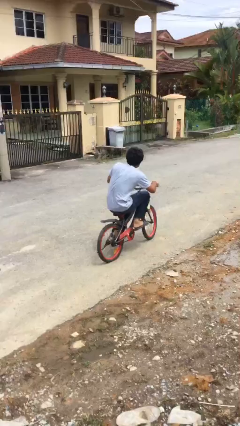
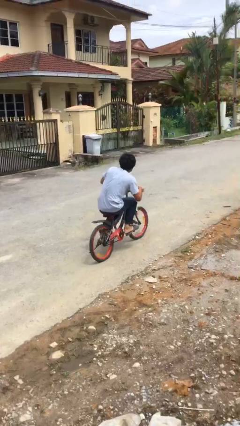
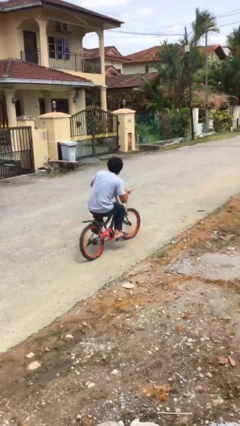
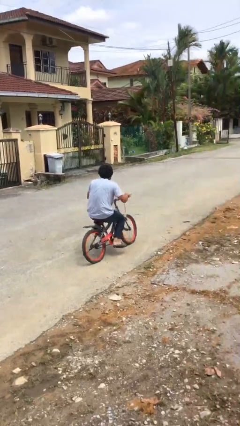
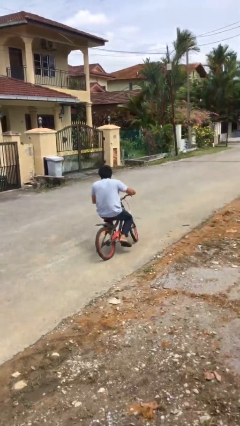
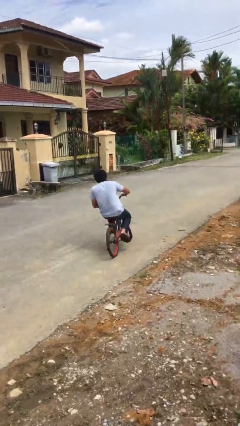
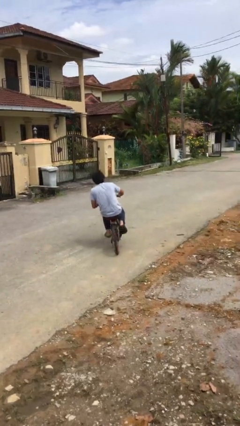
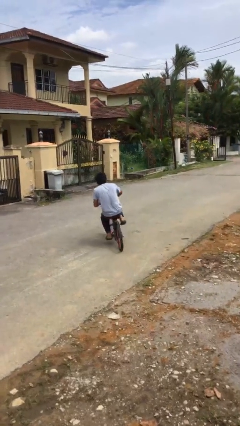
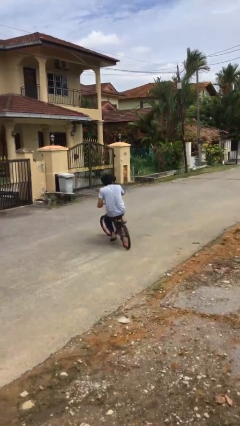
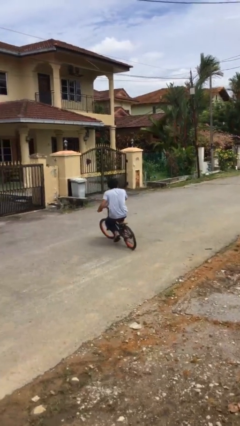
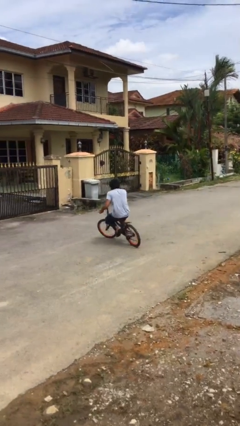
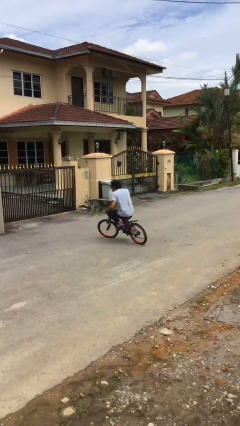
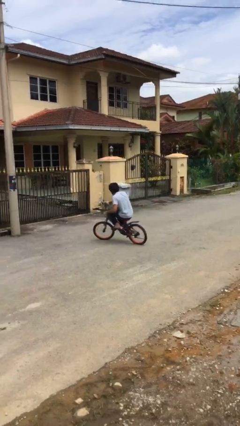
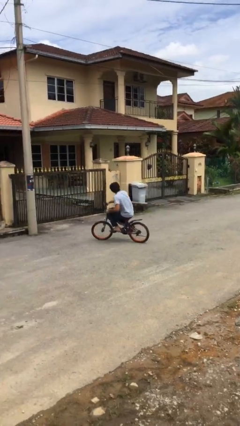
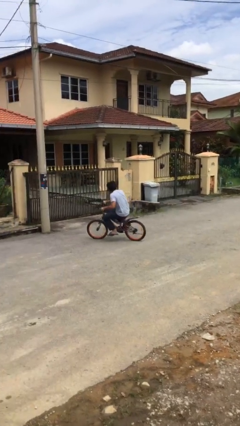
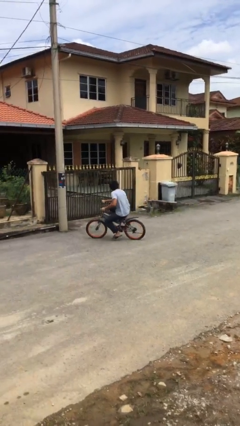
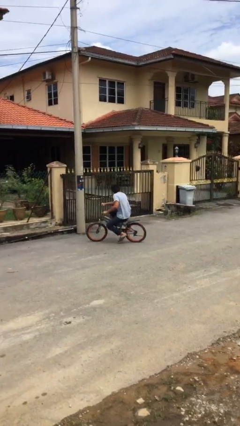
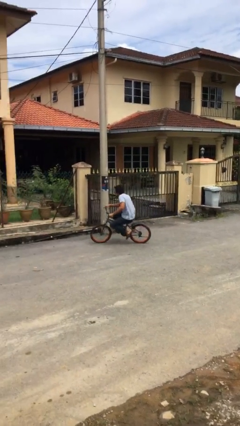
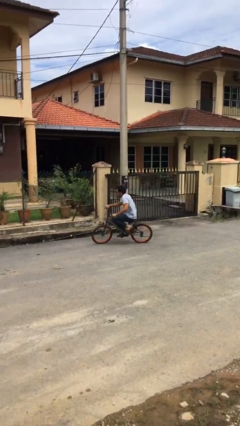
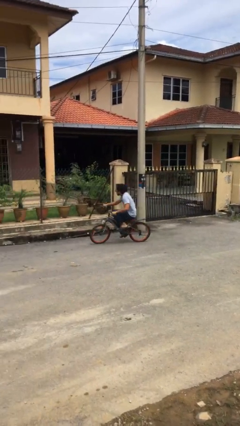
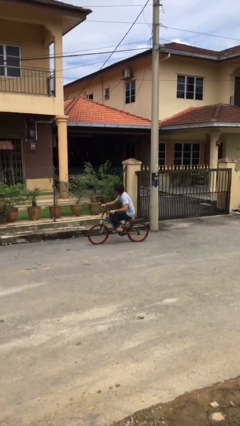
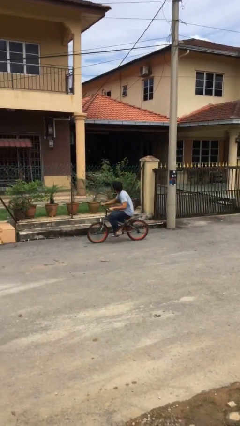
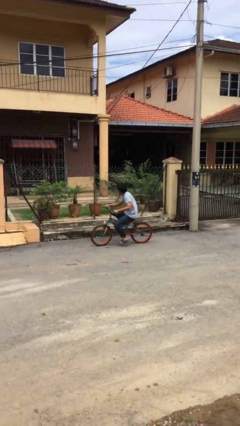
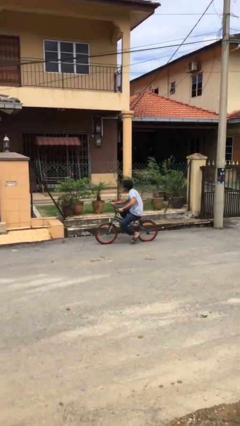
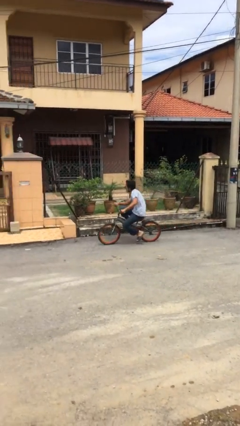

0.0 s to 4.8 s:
person rides bicycle

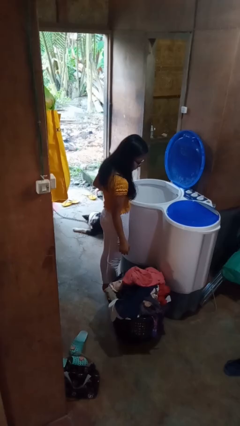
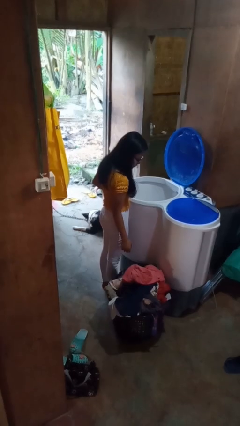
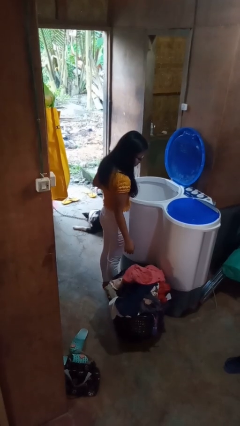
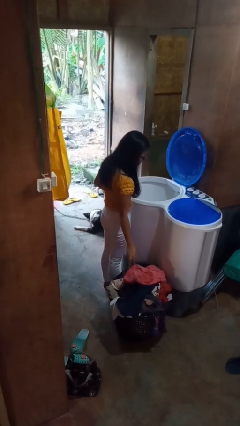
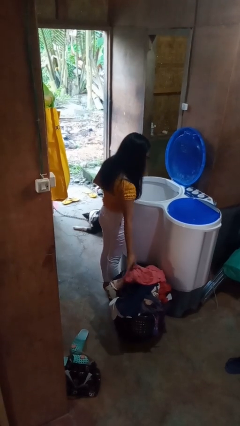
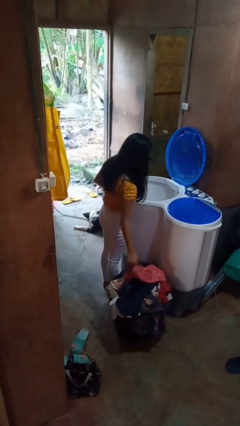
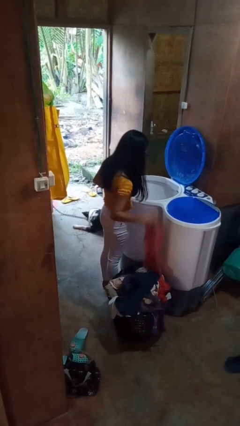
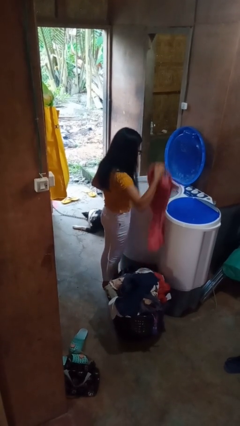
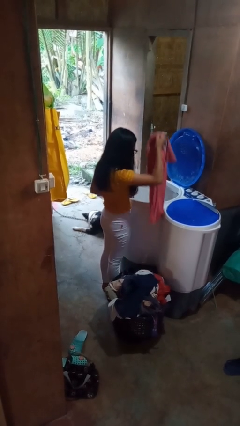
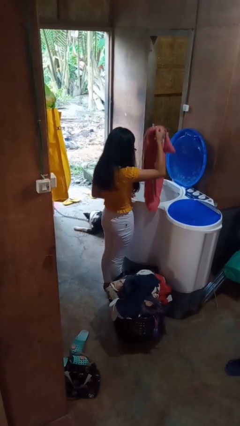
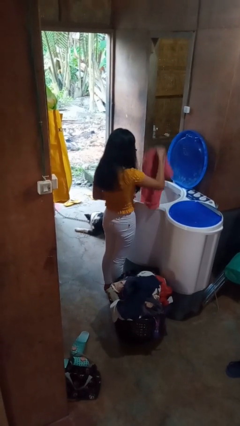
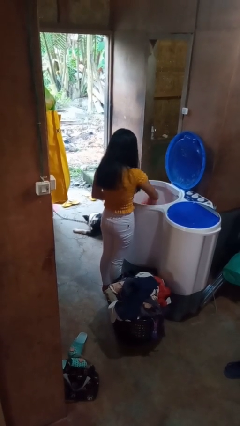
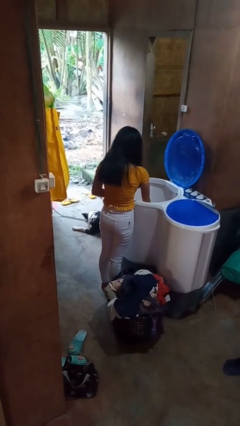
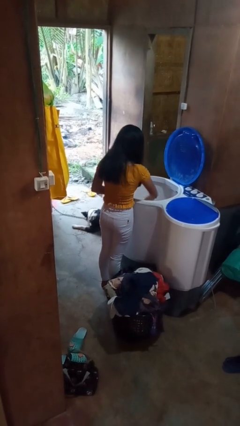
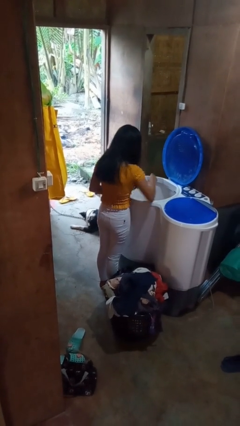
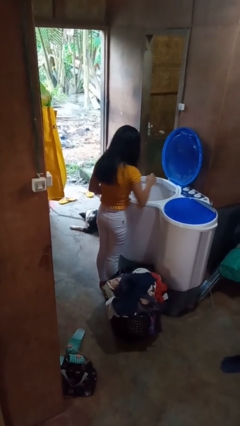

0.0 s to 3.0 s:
person loads clotheswasher

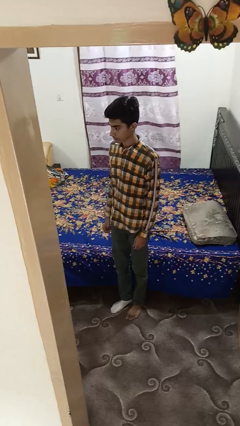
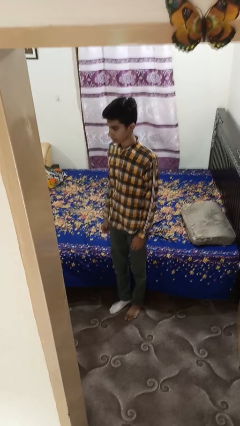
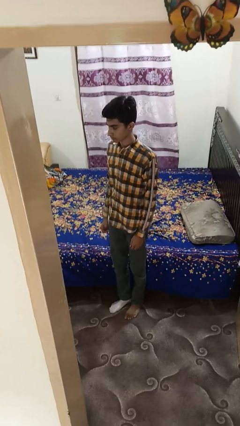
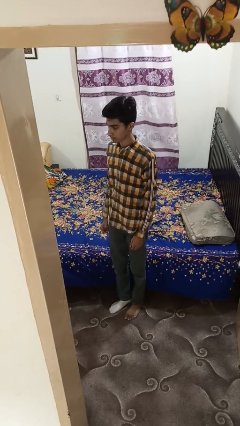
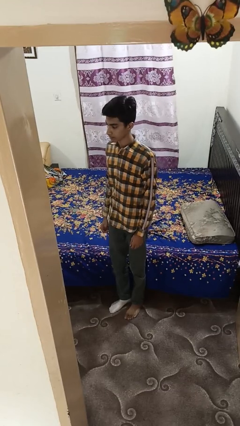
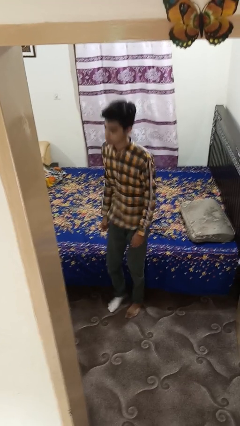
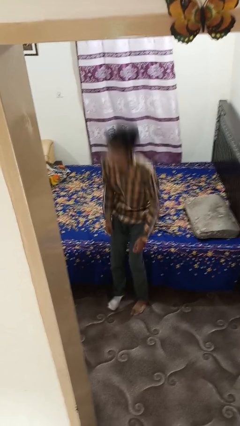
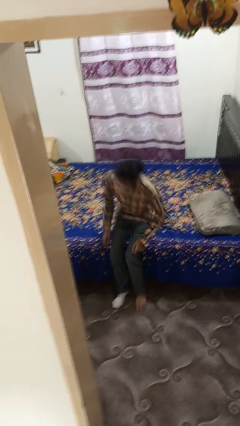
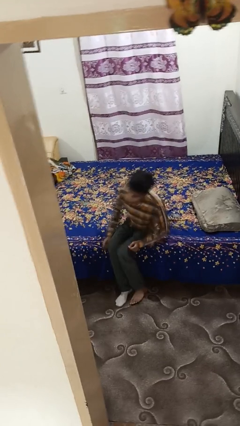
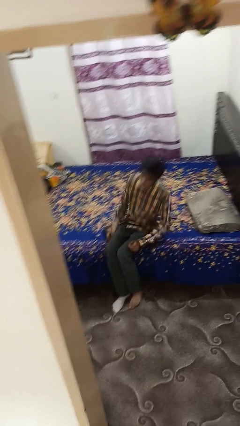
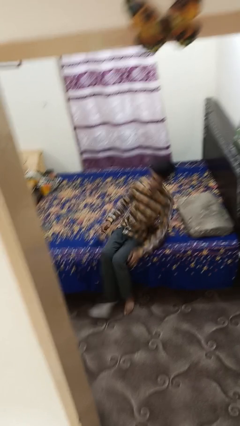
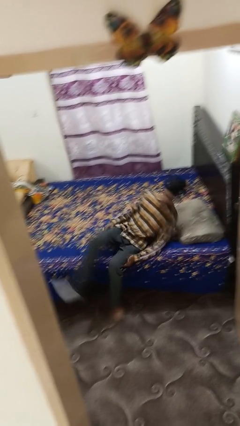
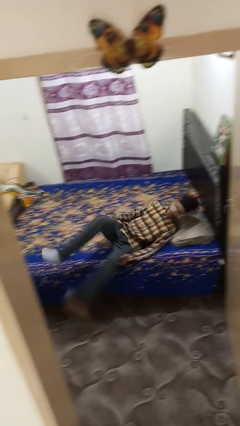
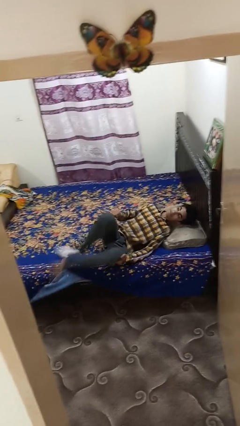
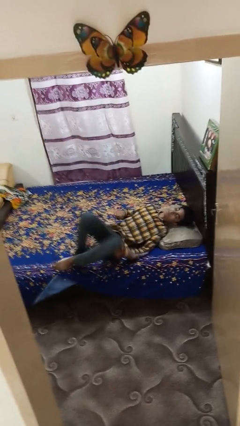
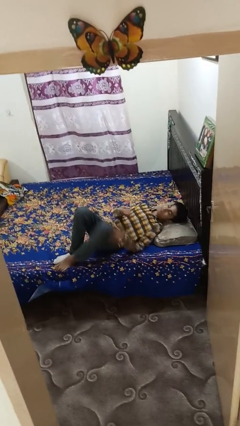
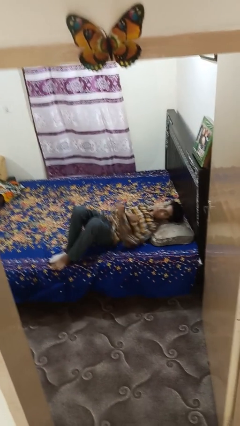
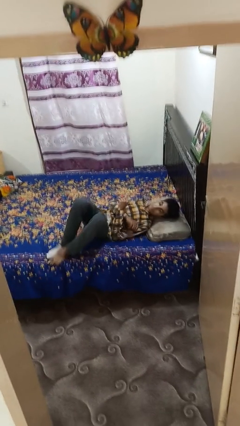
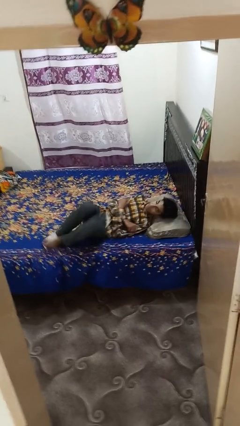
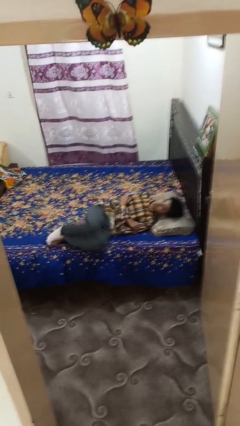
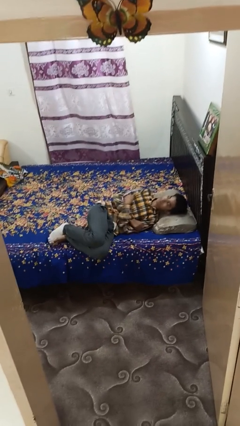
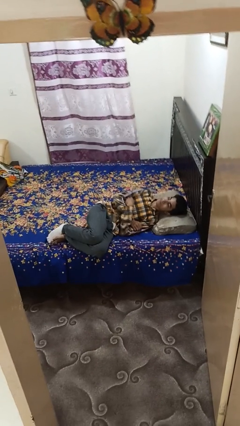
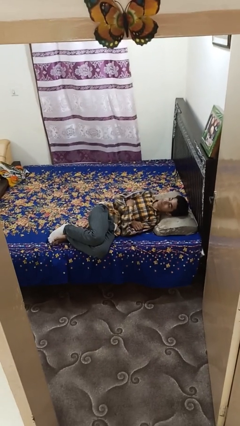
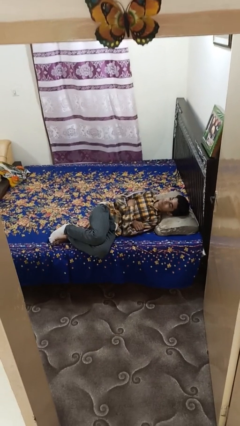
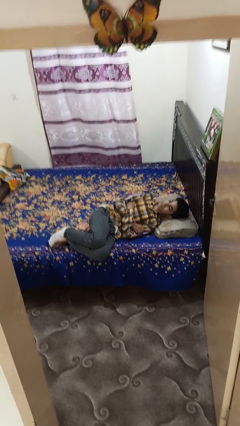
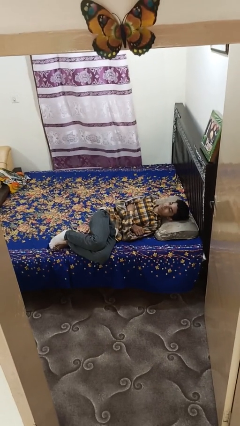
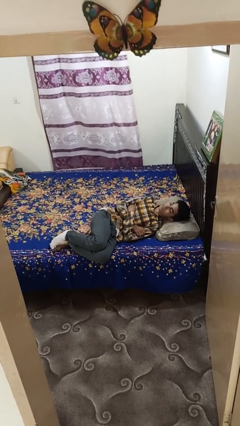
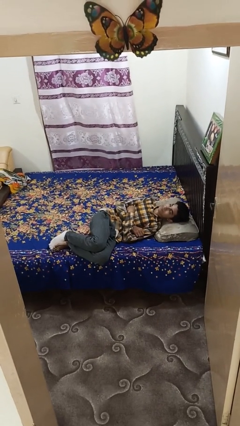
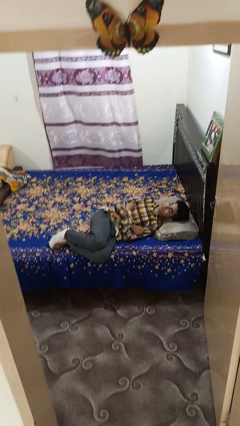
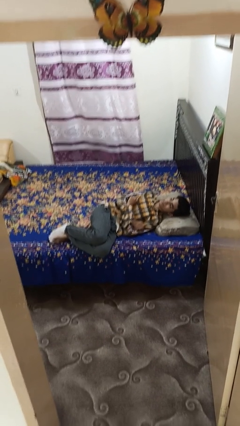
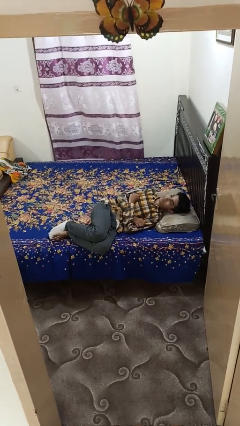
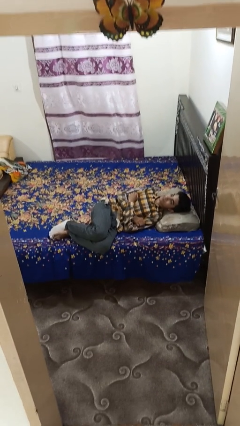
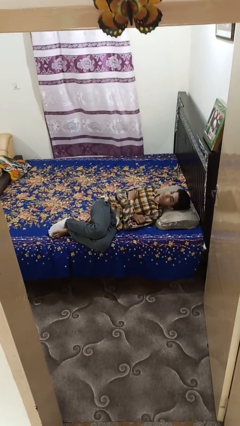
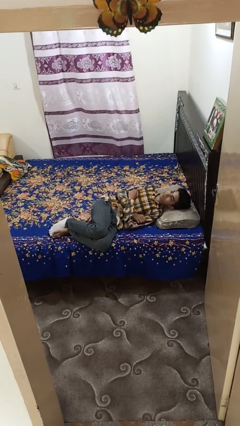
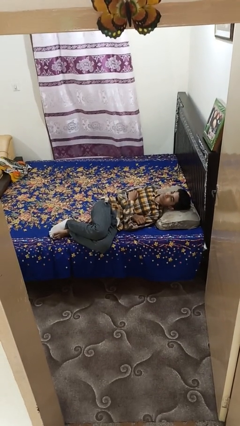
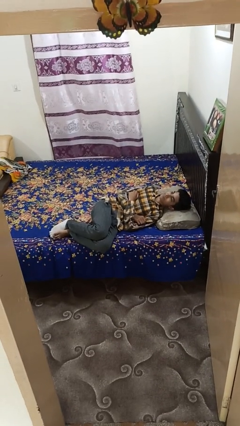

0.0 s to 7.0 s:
person lies down on bed

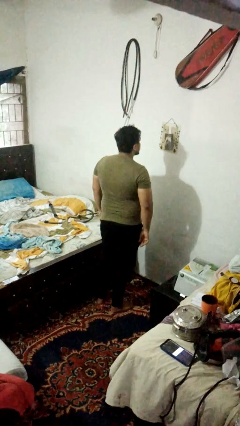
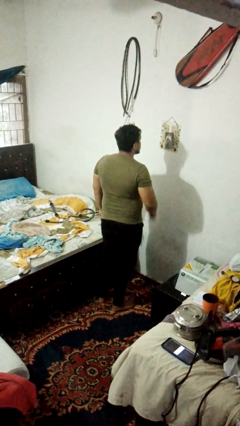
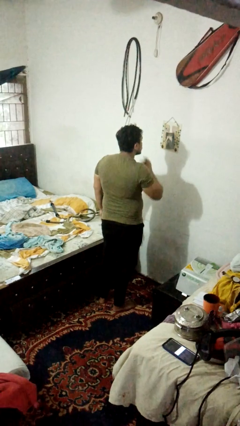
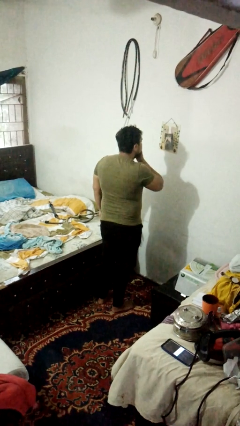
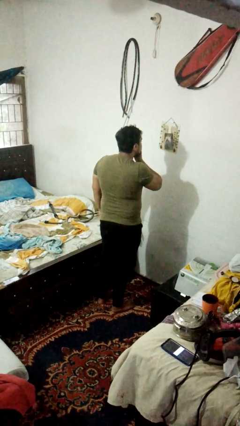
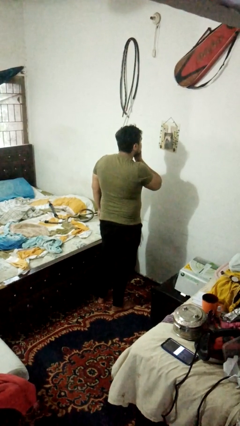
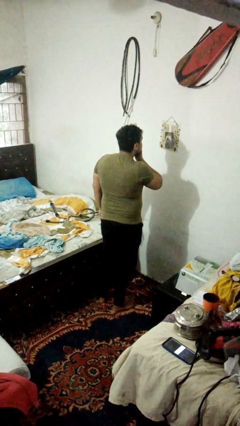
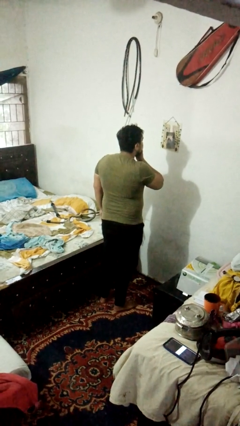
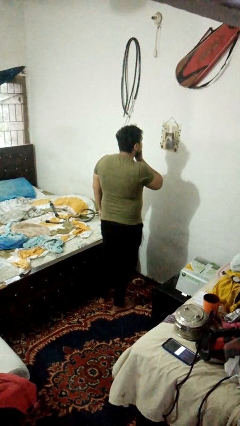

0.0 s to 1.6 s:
person strokes chin

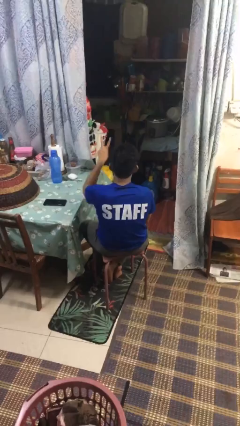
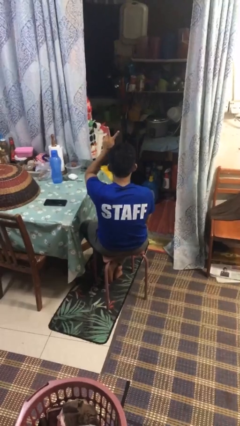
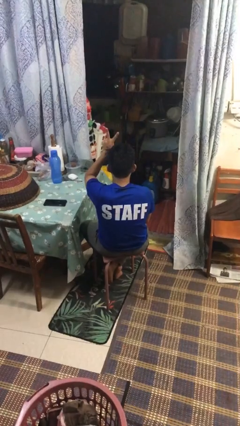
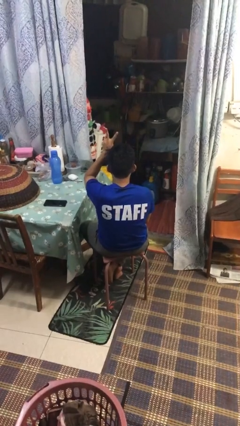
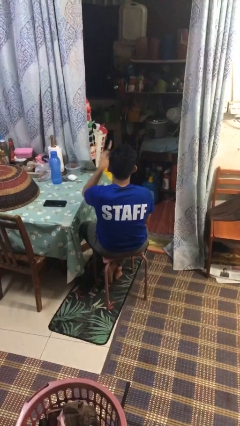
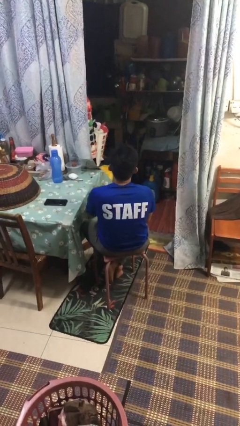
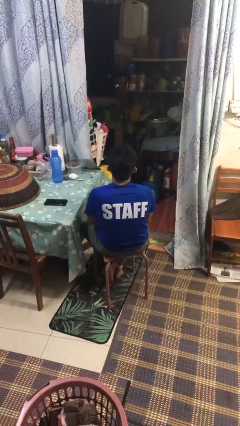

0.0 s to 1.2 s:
person gestures peace

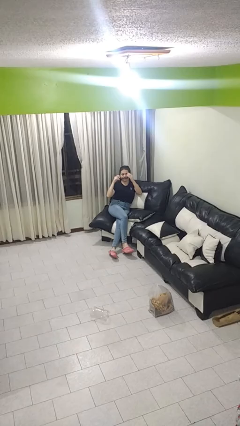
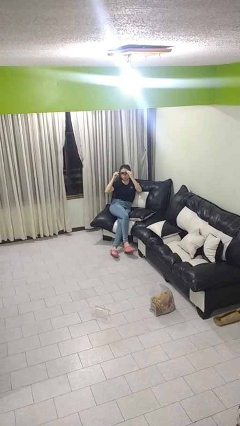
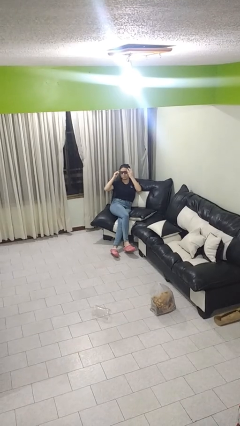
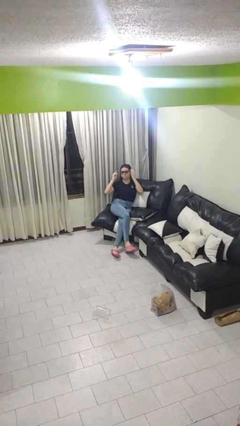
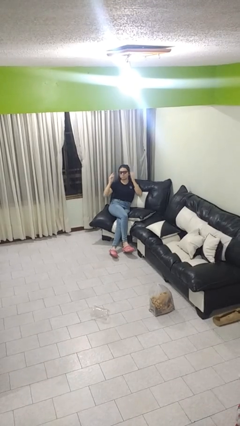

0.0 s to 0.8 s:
person puts on sunglasses
